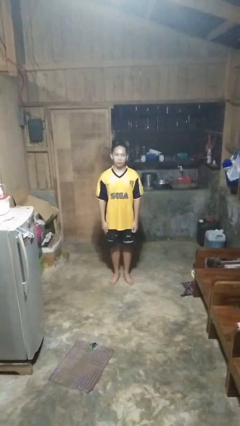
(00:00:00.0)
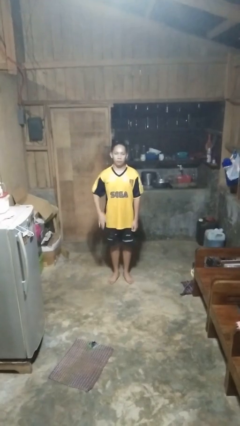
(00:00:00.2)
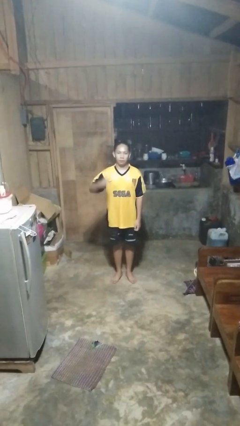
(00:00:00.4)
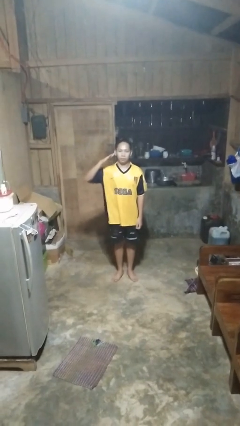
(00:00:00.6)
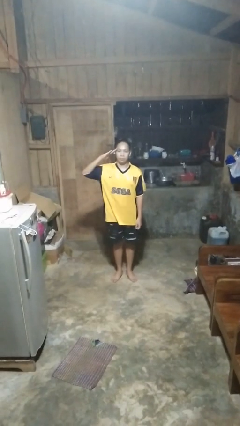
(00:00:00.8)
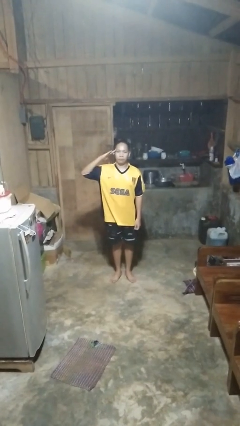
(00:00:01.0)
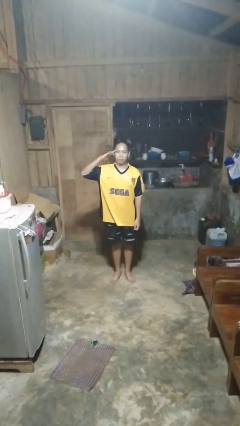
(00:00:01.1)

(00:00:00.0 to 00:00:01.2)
person salutes

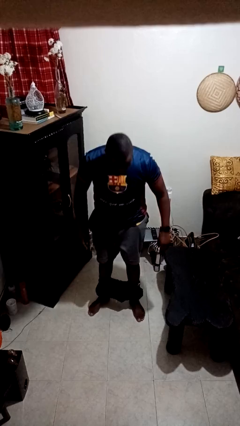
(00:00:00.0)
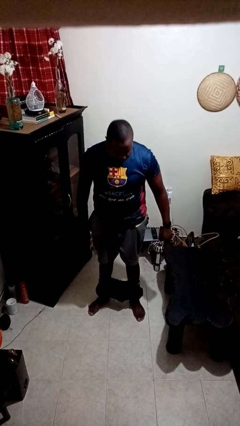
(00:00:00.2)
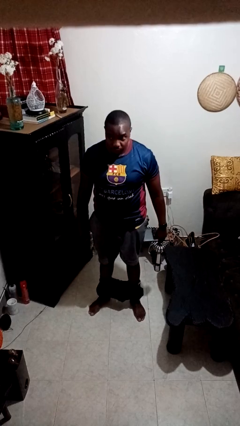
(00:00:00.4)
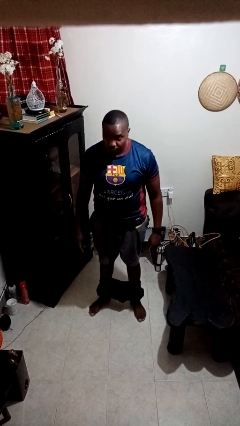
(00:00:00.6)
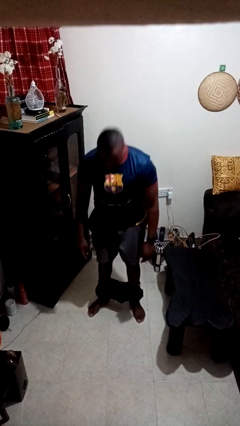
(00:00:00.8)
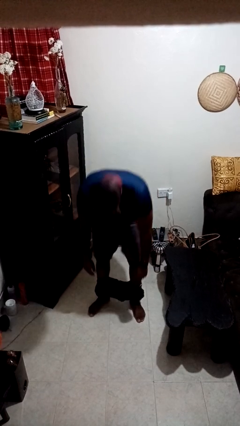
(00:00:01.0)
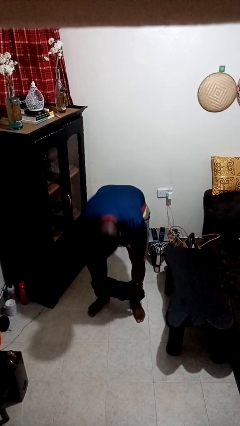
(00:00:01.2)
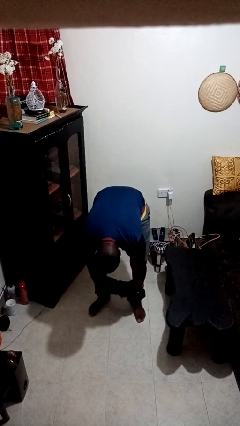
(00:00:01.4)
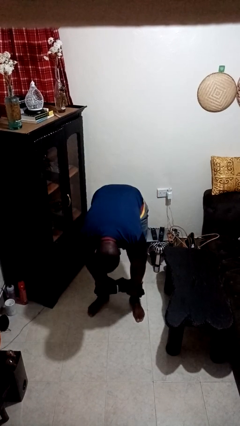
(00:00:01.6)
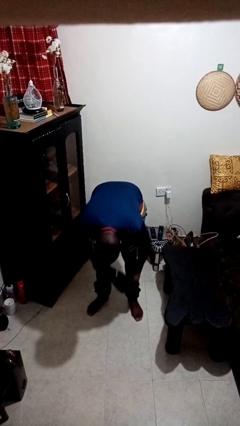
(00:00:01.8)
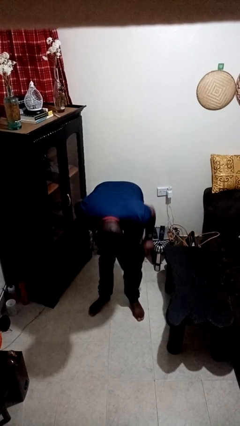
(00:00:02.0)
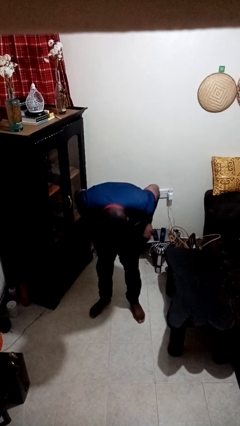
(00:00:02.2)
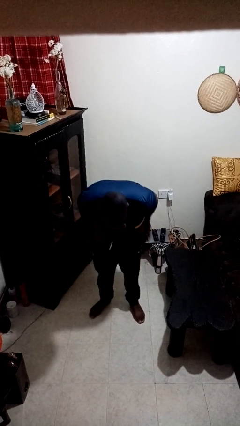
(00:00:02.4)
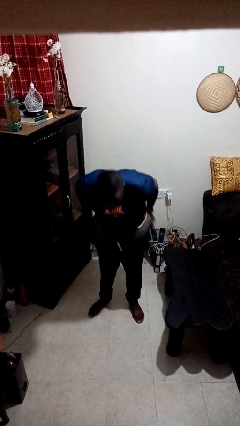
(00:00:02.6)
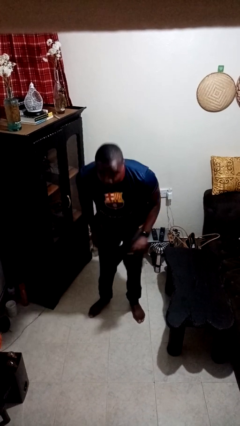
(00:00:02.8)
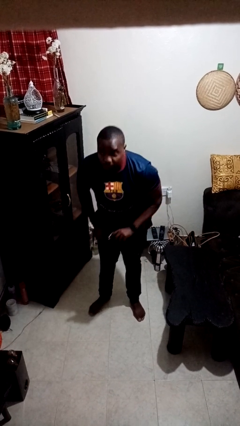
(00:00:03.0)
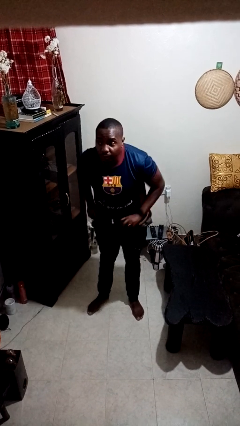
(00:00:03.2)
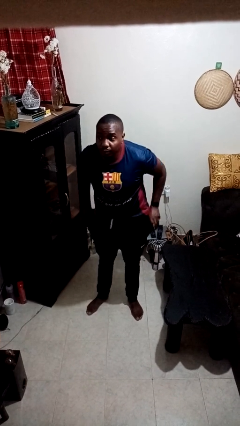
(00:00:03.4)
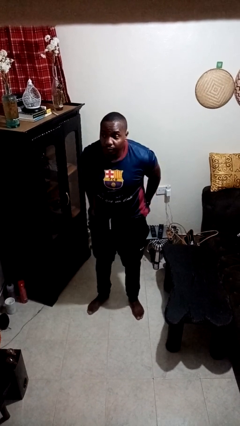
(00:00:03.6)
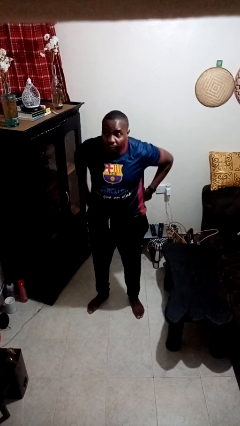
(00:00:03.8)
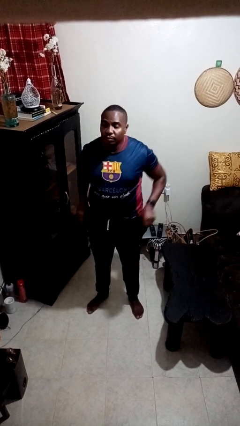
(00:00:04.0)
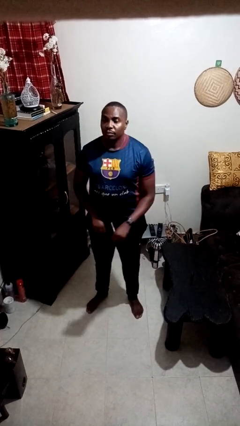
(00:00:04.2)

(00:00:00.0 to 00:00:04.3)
person puts on pants

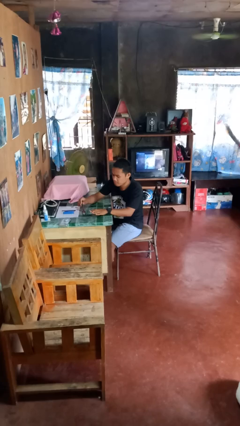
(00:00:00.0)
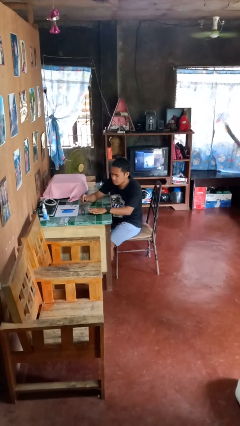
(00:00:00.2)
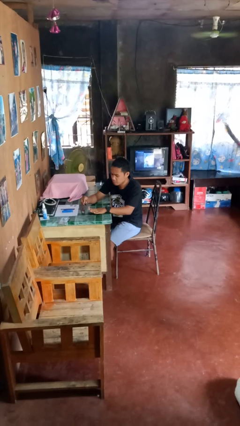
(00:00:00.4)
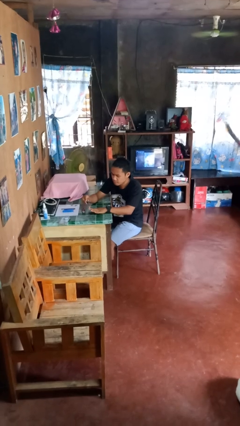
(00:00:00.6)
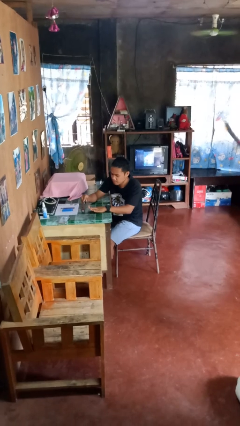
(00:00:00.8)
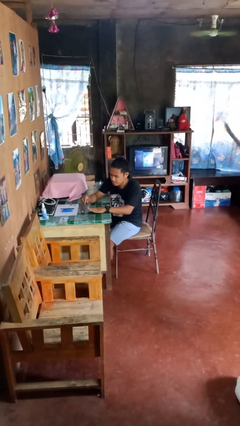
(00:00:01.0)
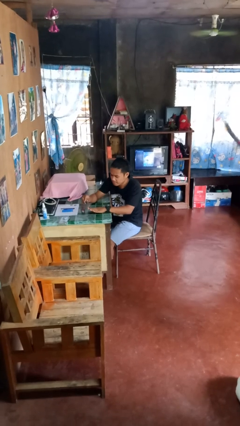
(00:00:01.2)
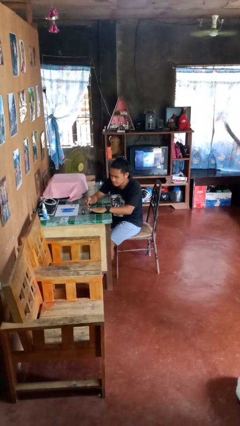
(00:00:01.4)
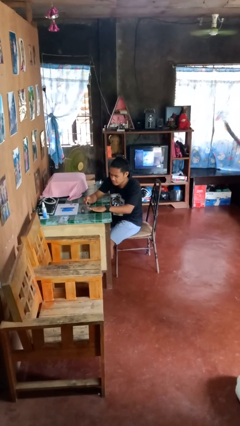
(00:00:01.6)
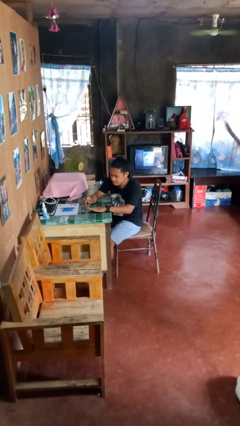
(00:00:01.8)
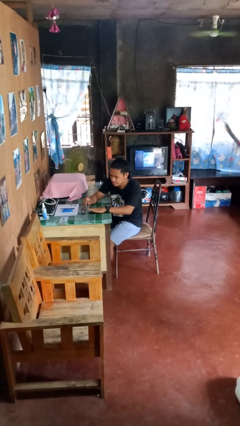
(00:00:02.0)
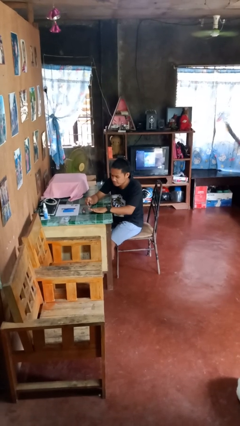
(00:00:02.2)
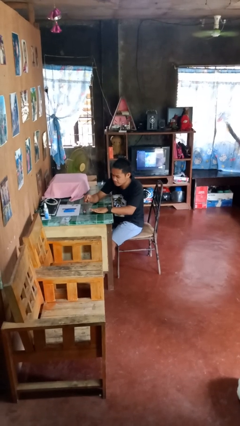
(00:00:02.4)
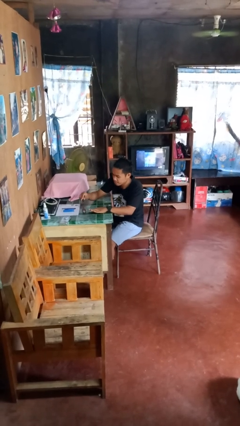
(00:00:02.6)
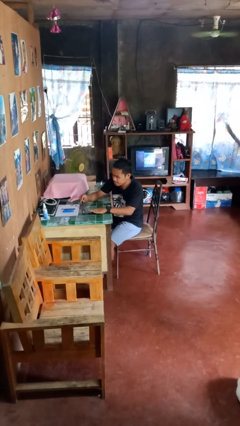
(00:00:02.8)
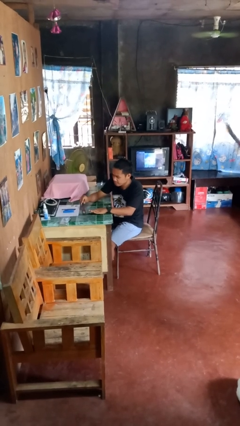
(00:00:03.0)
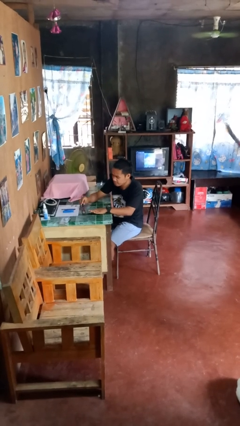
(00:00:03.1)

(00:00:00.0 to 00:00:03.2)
person paints fingernails

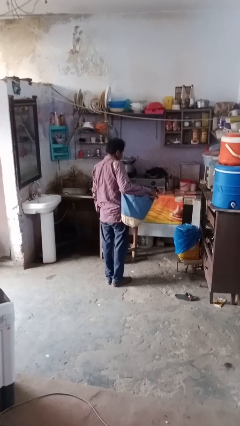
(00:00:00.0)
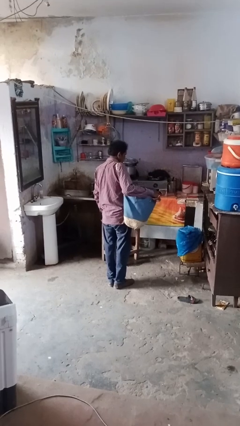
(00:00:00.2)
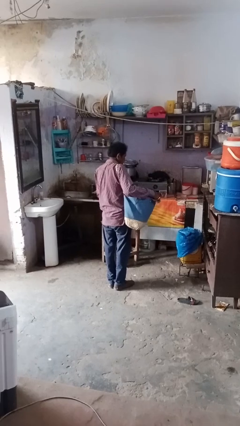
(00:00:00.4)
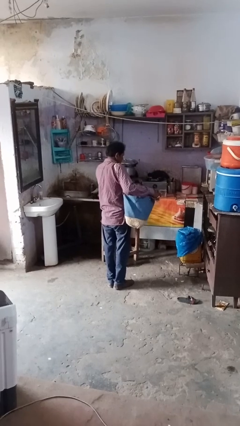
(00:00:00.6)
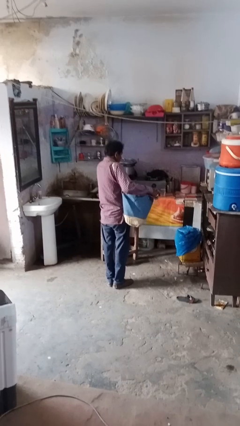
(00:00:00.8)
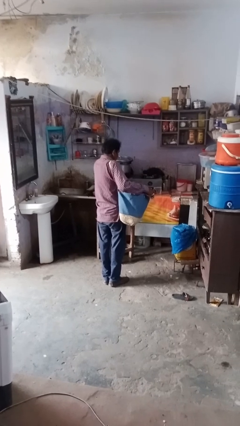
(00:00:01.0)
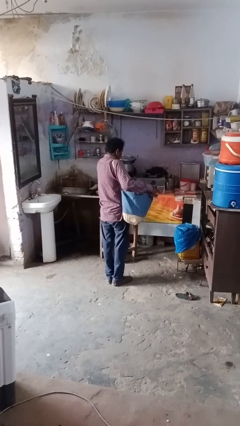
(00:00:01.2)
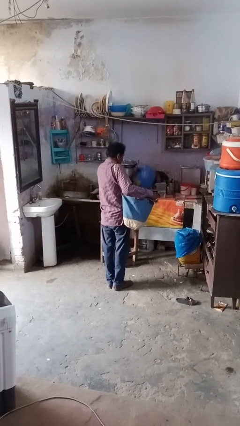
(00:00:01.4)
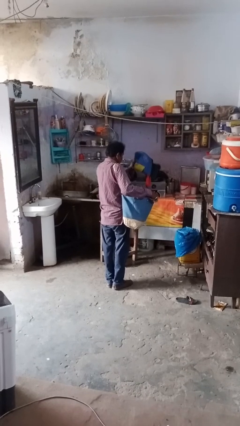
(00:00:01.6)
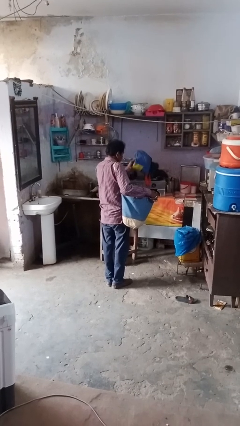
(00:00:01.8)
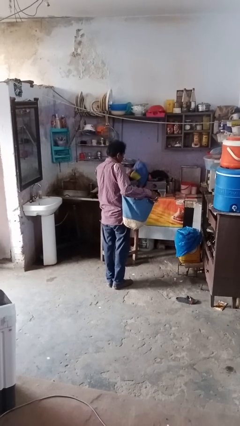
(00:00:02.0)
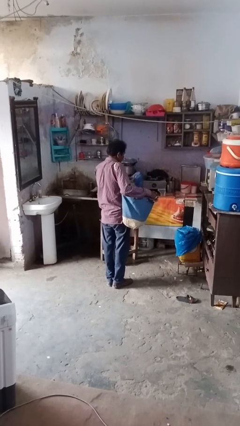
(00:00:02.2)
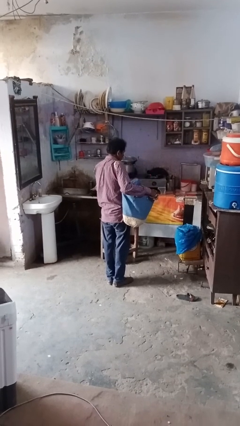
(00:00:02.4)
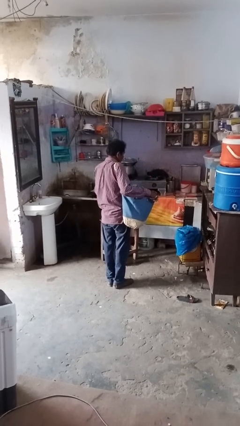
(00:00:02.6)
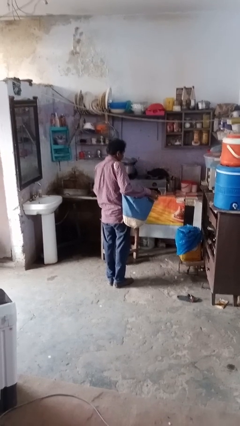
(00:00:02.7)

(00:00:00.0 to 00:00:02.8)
person takes object from bag

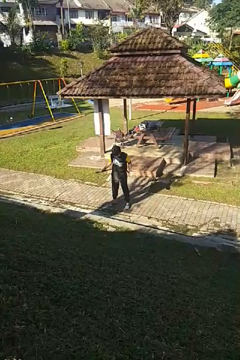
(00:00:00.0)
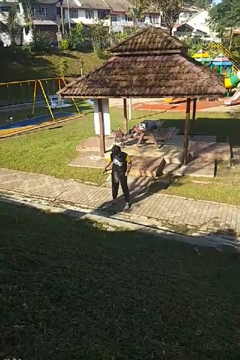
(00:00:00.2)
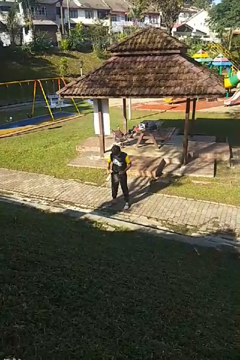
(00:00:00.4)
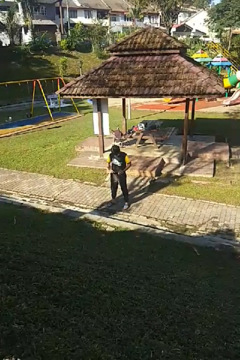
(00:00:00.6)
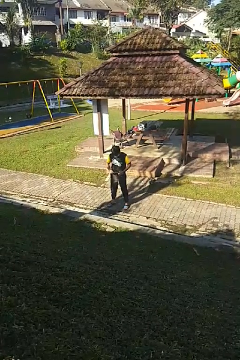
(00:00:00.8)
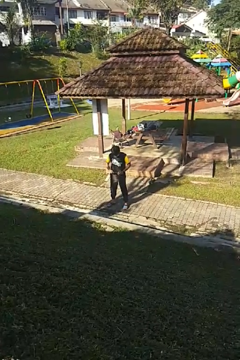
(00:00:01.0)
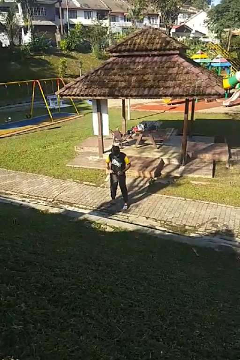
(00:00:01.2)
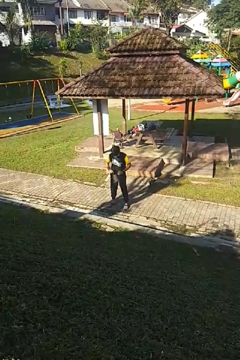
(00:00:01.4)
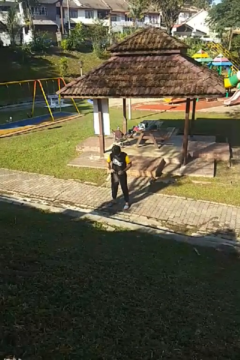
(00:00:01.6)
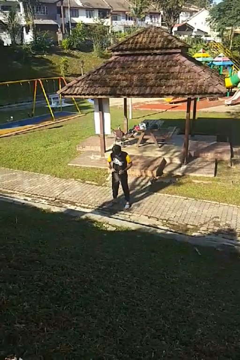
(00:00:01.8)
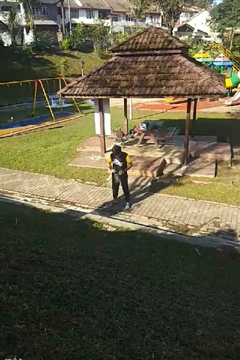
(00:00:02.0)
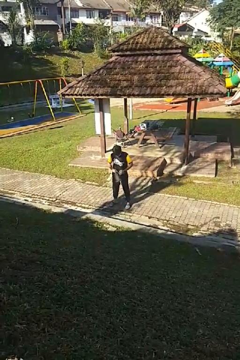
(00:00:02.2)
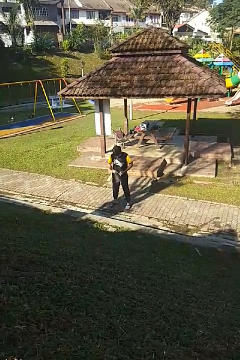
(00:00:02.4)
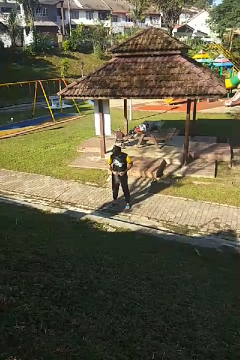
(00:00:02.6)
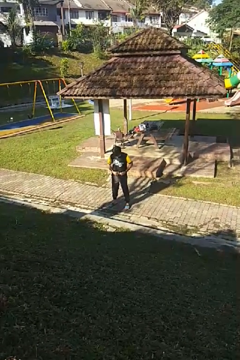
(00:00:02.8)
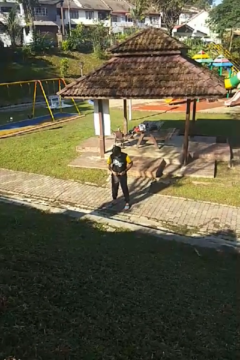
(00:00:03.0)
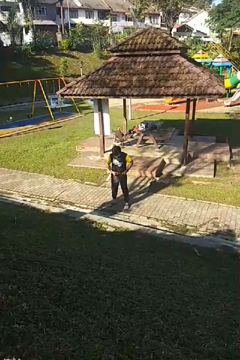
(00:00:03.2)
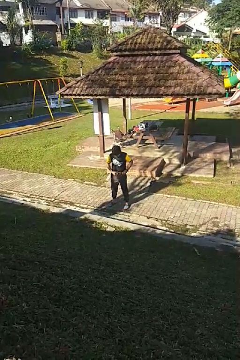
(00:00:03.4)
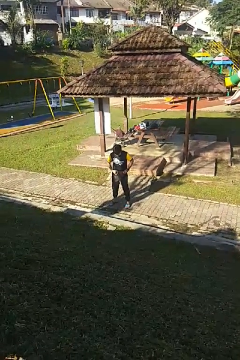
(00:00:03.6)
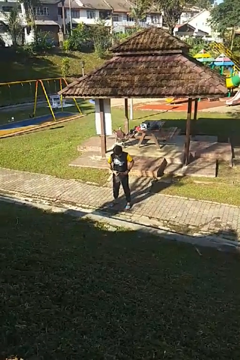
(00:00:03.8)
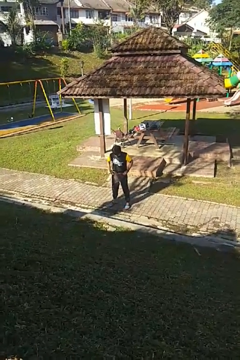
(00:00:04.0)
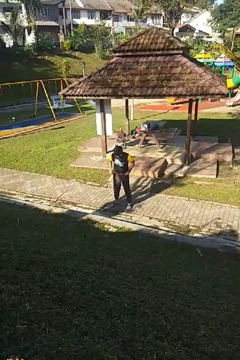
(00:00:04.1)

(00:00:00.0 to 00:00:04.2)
person puts on belt

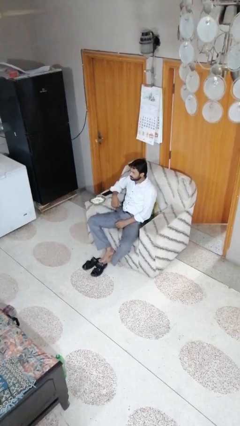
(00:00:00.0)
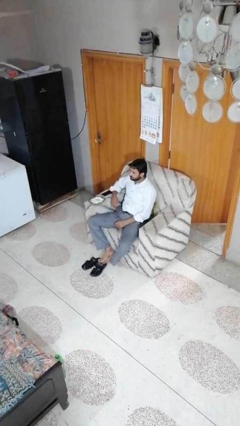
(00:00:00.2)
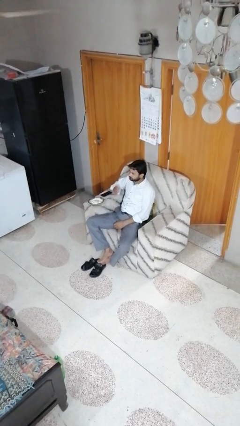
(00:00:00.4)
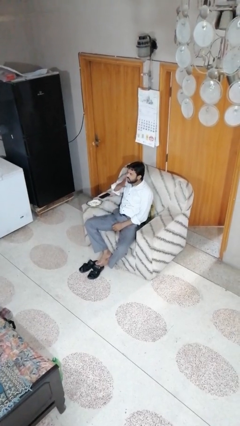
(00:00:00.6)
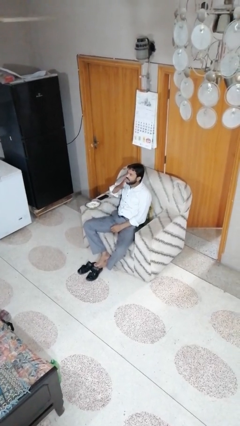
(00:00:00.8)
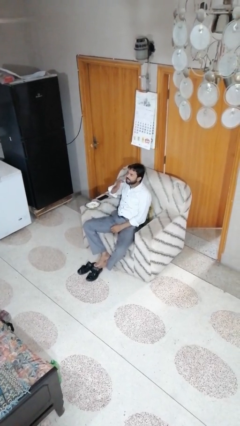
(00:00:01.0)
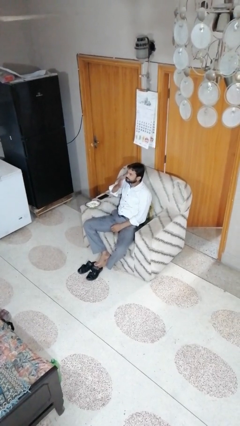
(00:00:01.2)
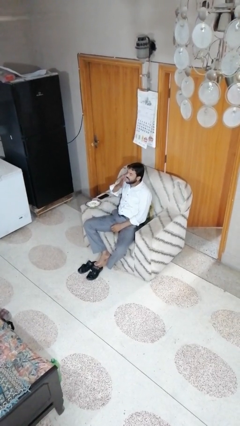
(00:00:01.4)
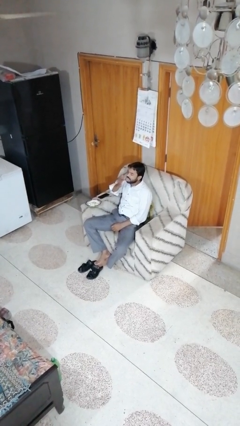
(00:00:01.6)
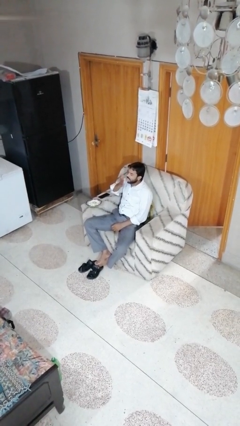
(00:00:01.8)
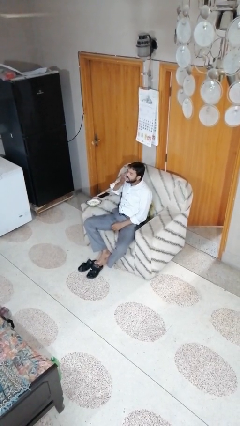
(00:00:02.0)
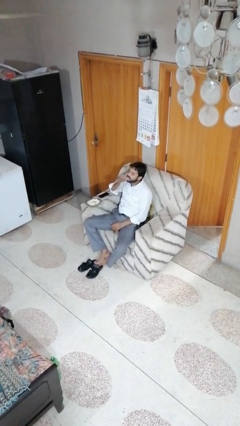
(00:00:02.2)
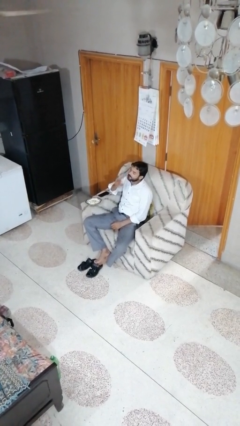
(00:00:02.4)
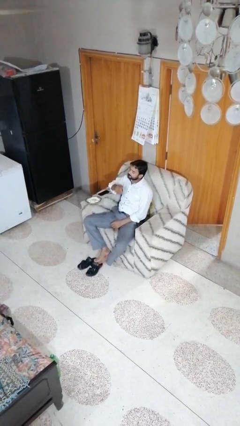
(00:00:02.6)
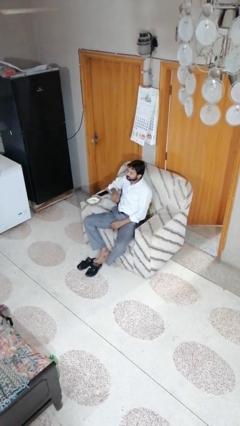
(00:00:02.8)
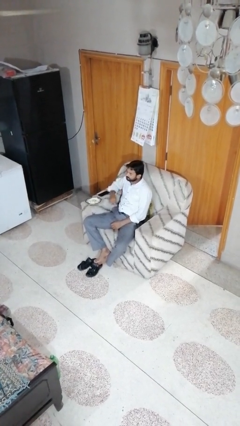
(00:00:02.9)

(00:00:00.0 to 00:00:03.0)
person licks fingers
